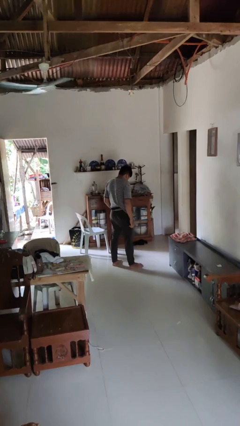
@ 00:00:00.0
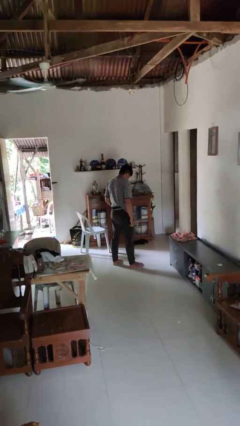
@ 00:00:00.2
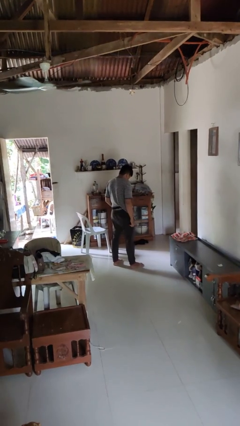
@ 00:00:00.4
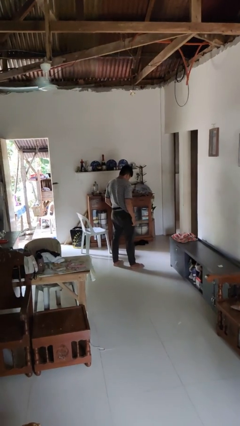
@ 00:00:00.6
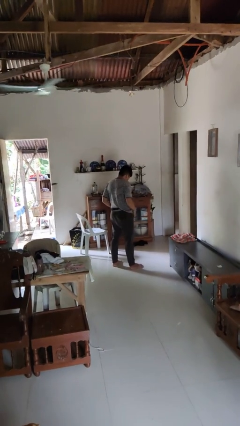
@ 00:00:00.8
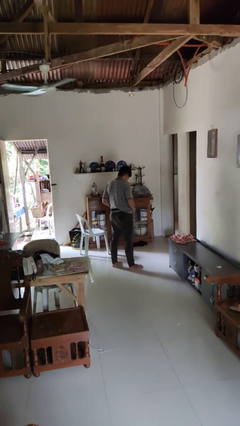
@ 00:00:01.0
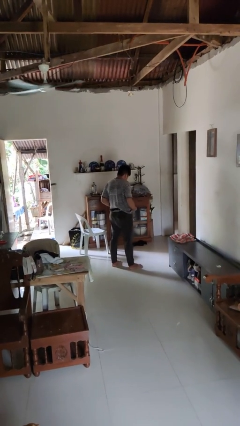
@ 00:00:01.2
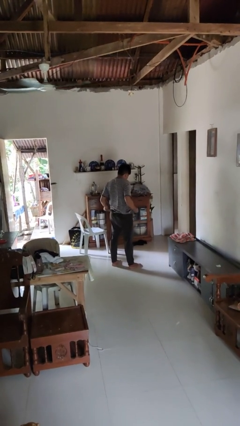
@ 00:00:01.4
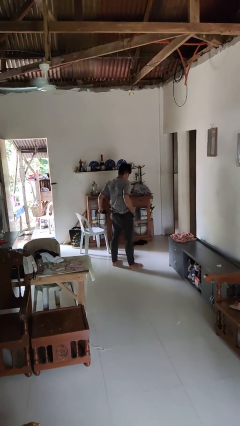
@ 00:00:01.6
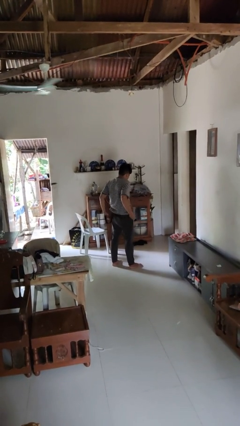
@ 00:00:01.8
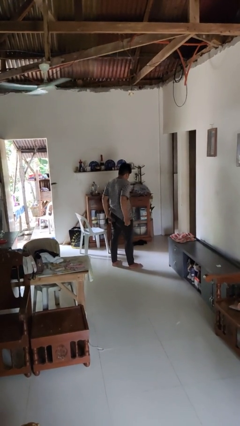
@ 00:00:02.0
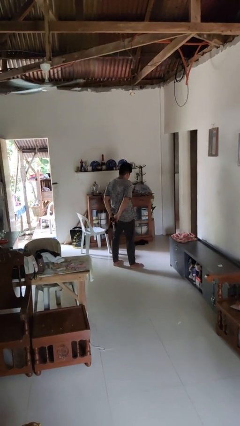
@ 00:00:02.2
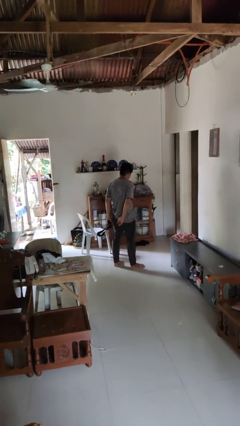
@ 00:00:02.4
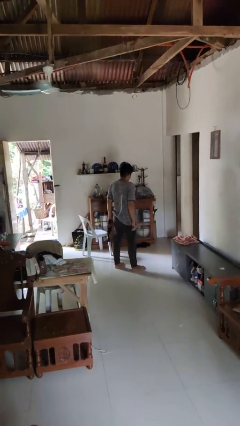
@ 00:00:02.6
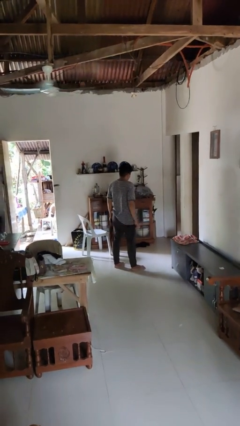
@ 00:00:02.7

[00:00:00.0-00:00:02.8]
person takes off belt

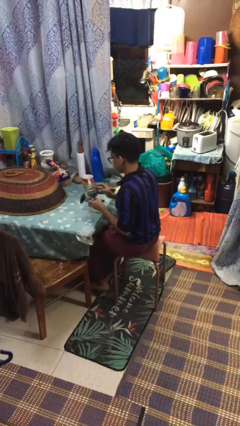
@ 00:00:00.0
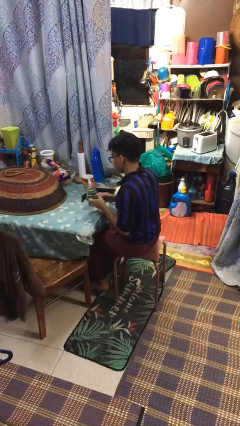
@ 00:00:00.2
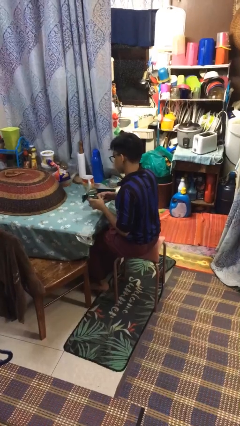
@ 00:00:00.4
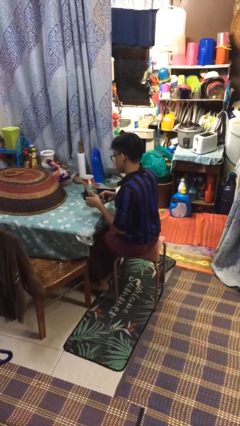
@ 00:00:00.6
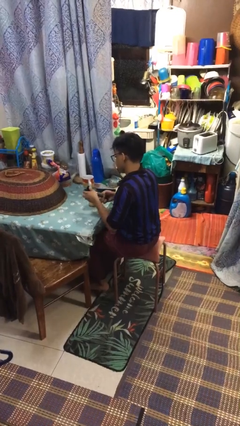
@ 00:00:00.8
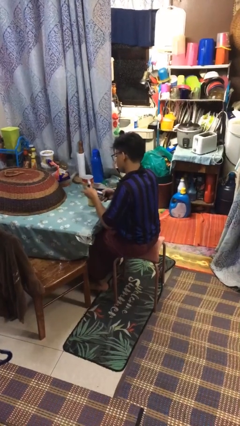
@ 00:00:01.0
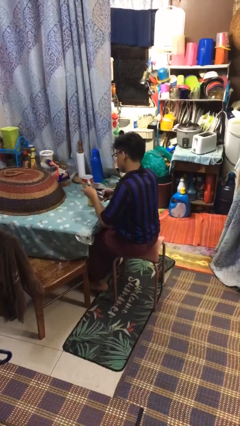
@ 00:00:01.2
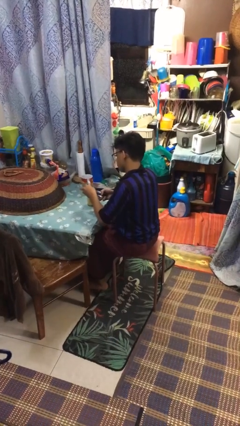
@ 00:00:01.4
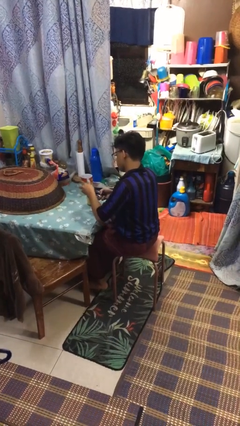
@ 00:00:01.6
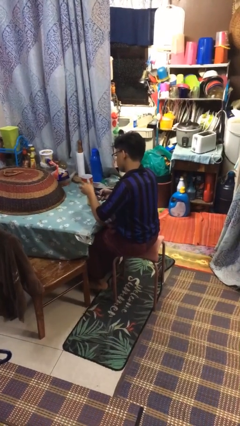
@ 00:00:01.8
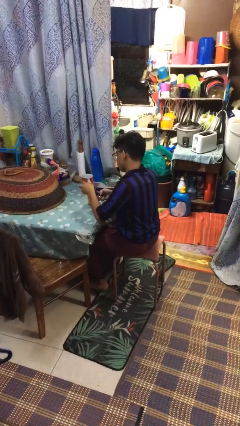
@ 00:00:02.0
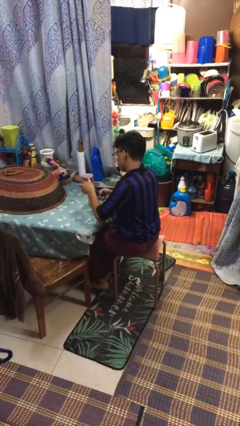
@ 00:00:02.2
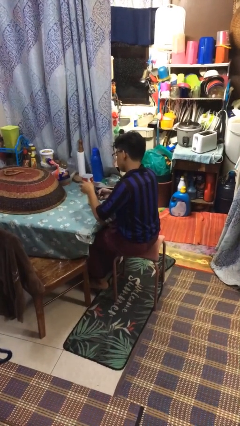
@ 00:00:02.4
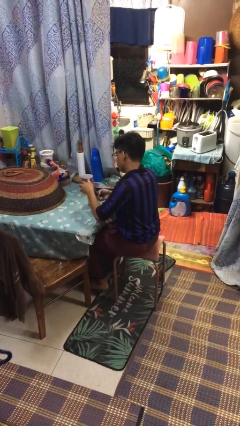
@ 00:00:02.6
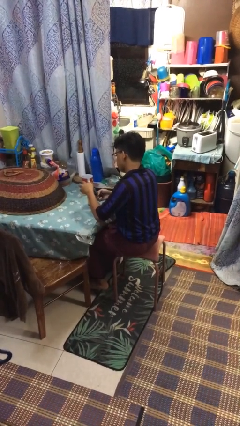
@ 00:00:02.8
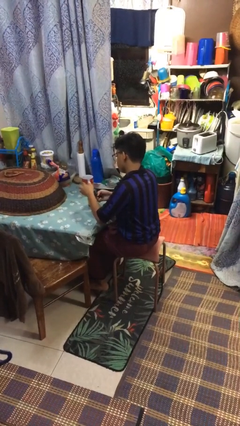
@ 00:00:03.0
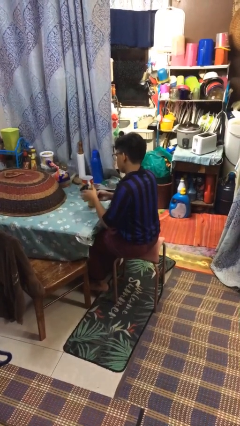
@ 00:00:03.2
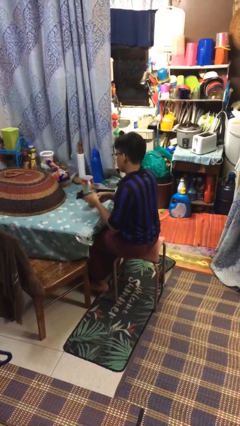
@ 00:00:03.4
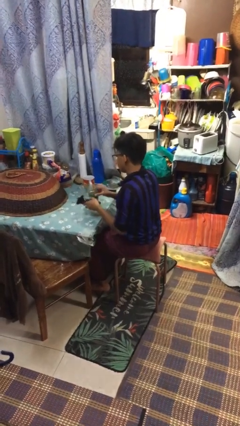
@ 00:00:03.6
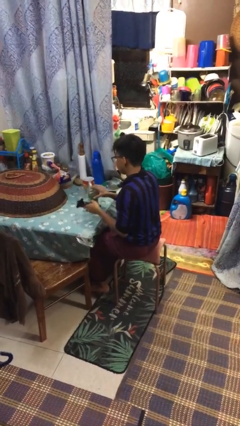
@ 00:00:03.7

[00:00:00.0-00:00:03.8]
person opens can with can opener

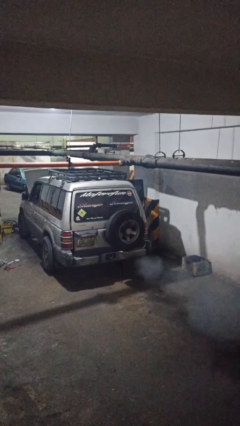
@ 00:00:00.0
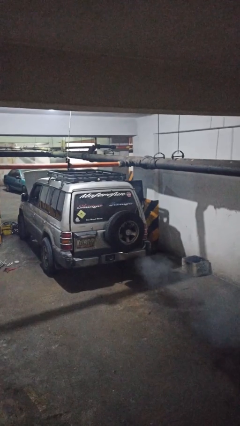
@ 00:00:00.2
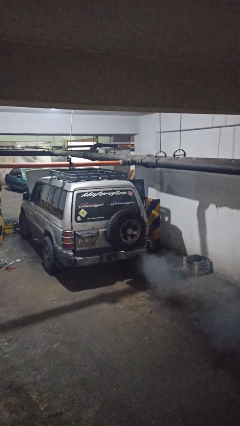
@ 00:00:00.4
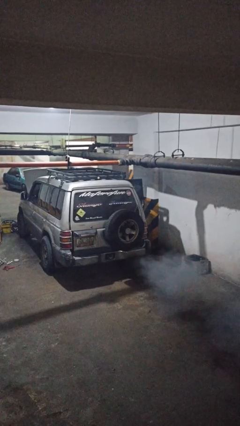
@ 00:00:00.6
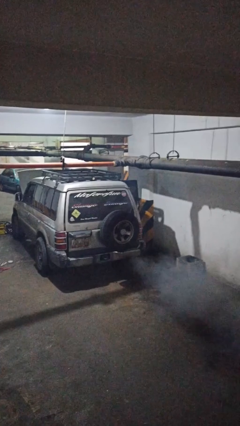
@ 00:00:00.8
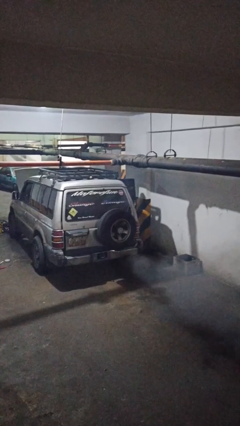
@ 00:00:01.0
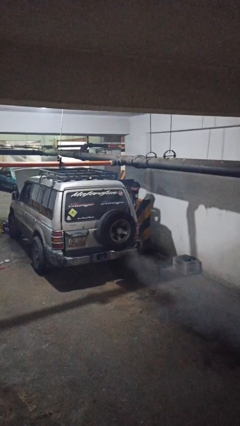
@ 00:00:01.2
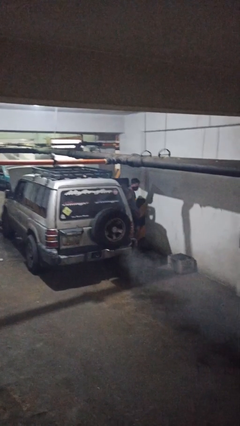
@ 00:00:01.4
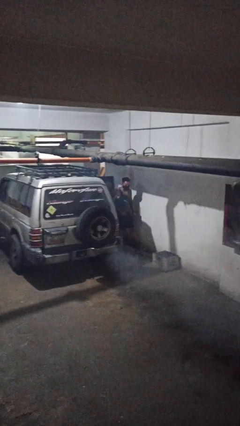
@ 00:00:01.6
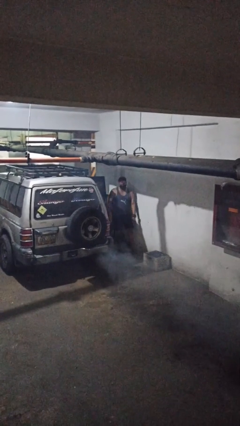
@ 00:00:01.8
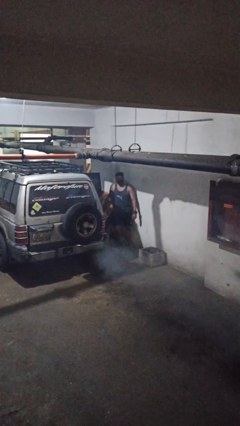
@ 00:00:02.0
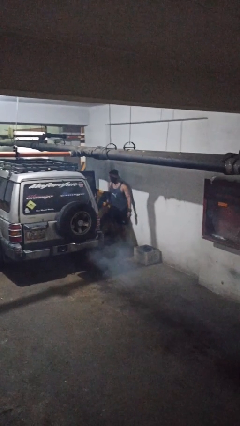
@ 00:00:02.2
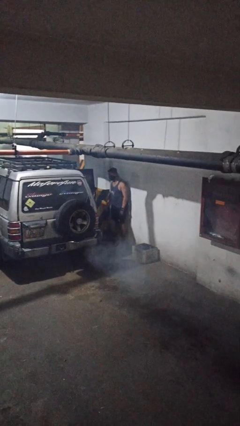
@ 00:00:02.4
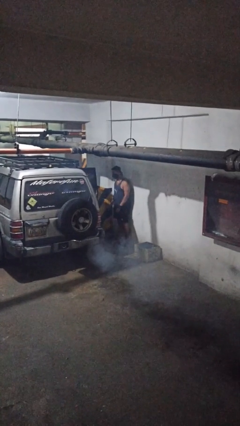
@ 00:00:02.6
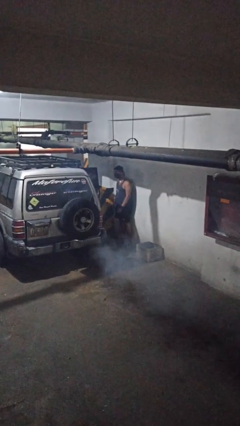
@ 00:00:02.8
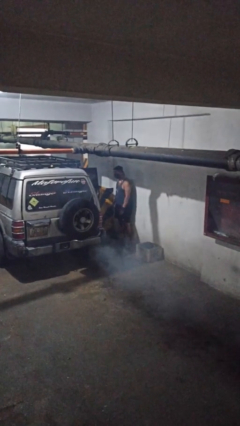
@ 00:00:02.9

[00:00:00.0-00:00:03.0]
person exits car

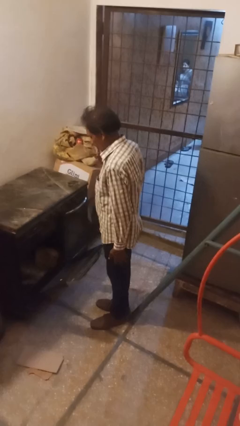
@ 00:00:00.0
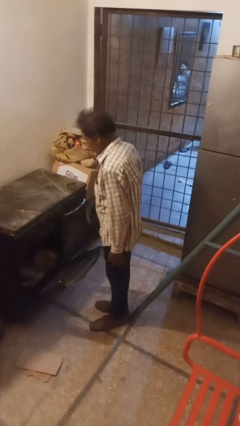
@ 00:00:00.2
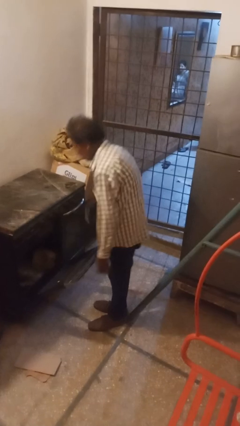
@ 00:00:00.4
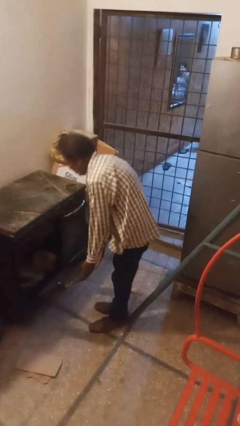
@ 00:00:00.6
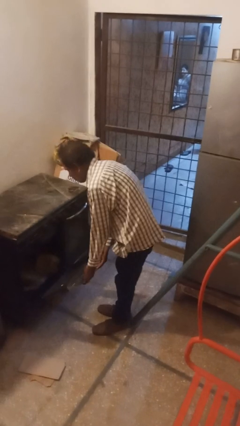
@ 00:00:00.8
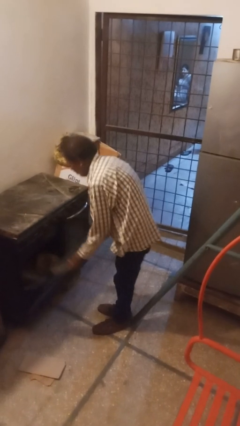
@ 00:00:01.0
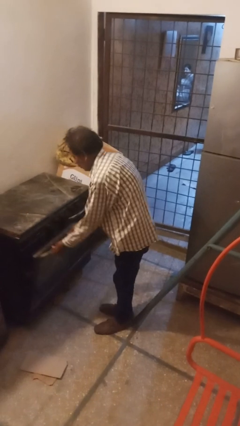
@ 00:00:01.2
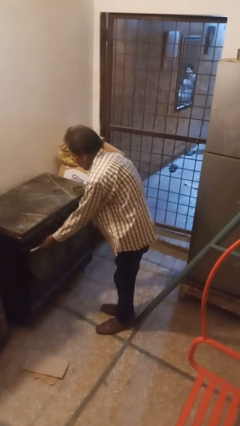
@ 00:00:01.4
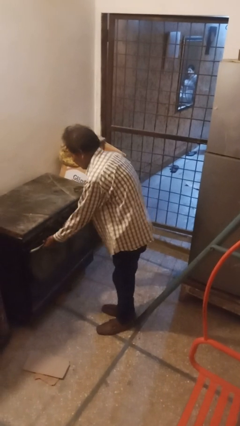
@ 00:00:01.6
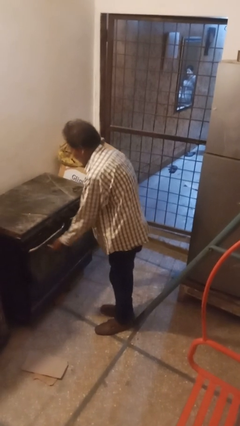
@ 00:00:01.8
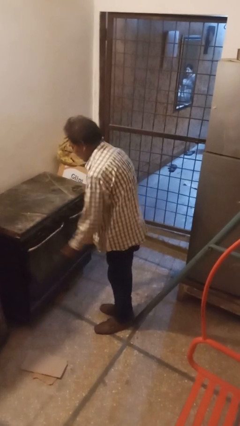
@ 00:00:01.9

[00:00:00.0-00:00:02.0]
person closes oven door

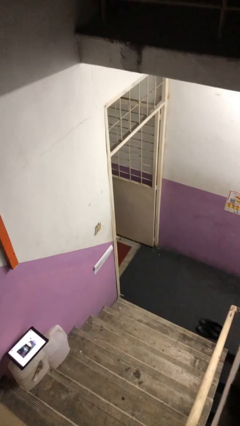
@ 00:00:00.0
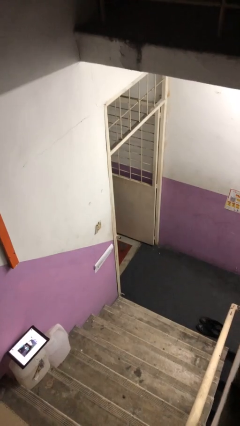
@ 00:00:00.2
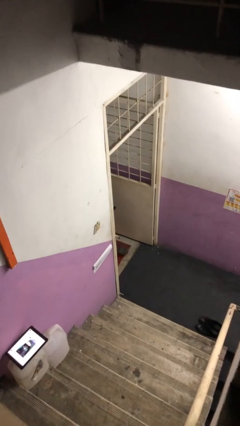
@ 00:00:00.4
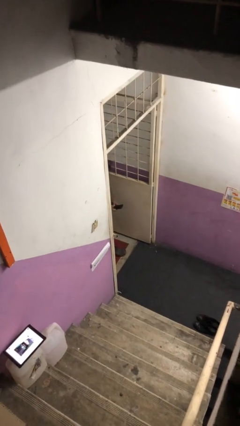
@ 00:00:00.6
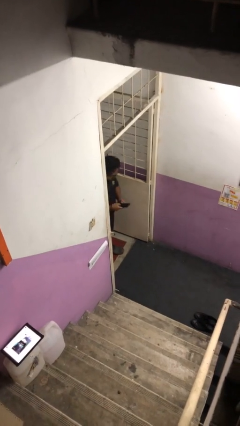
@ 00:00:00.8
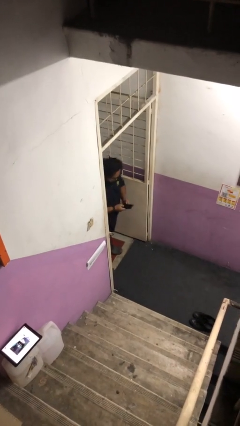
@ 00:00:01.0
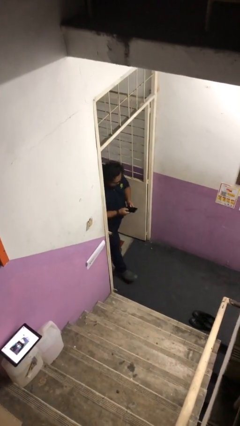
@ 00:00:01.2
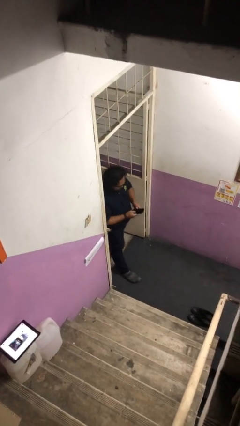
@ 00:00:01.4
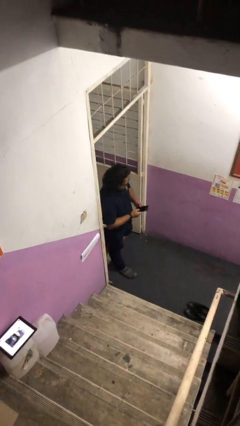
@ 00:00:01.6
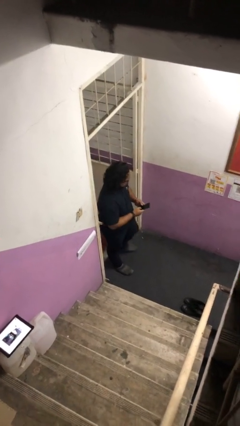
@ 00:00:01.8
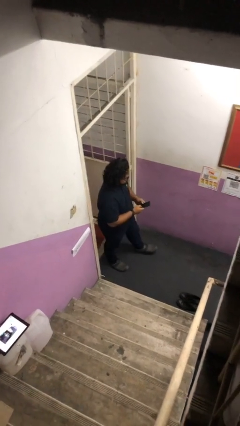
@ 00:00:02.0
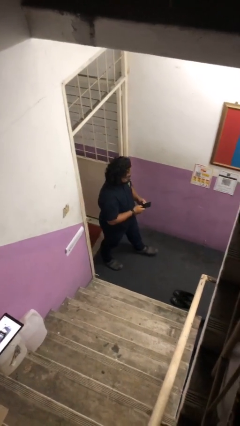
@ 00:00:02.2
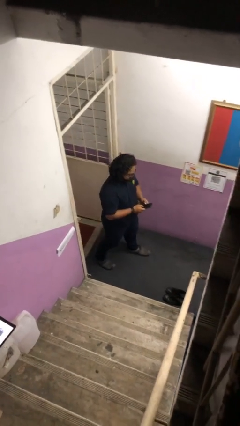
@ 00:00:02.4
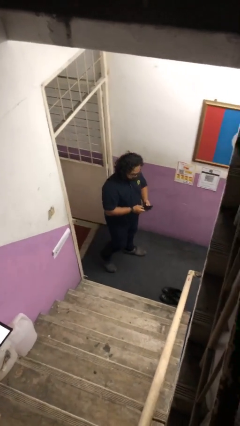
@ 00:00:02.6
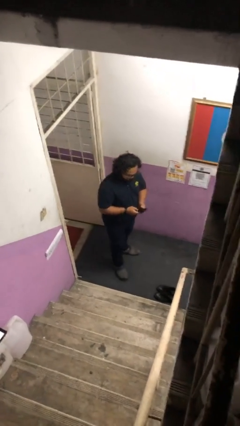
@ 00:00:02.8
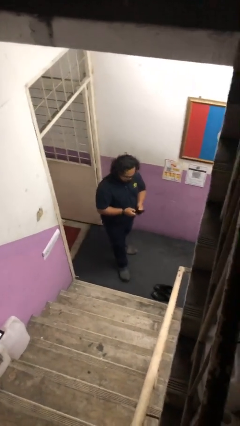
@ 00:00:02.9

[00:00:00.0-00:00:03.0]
person enters scene through structure

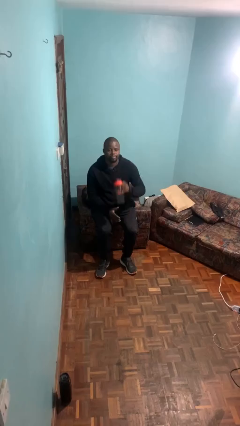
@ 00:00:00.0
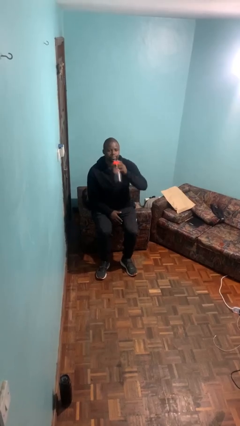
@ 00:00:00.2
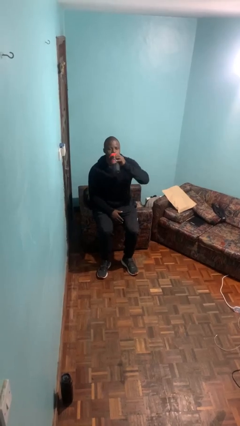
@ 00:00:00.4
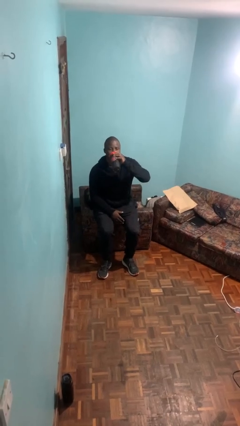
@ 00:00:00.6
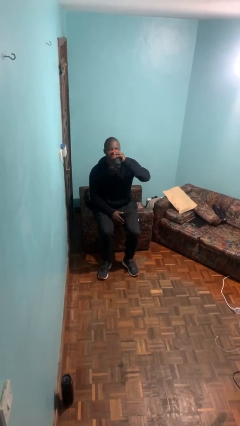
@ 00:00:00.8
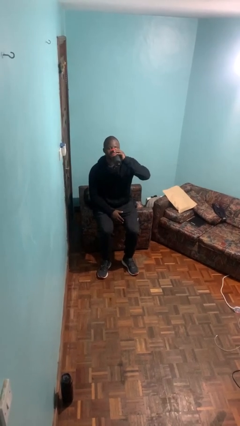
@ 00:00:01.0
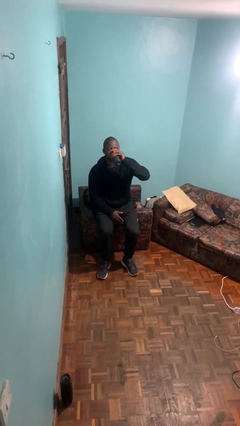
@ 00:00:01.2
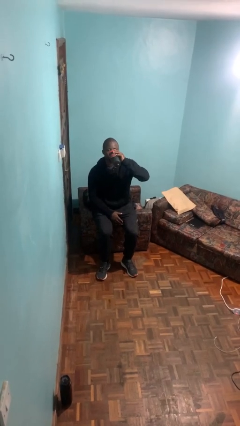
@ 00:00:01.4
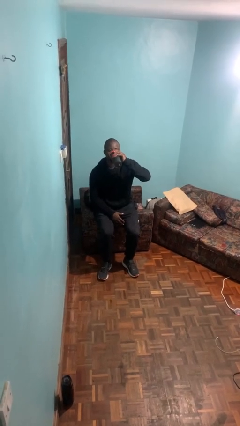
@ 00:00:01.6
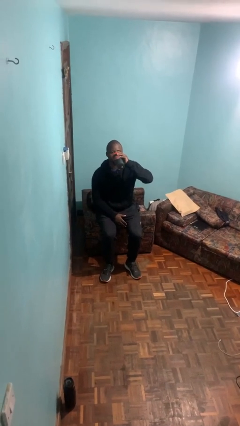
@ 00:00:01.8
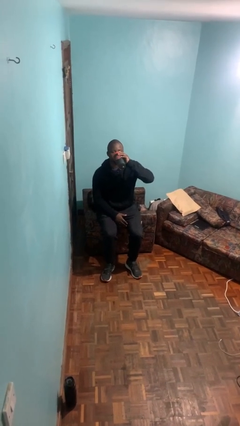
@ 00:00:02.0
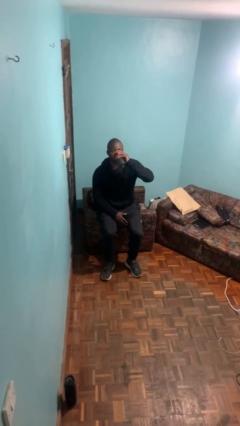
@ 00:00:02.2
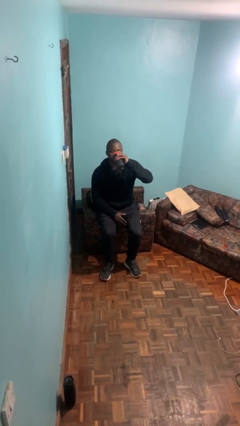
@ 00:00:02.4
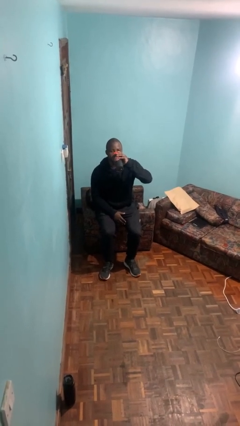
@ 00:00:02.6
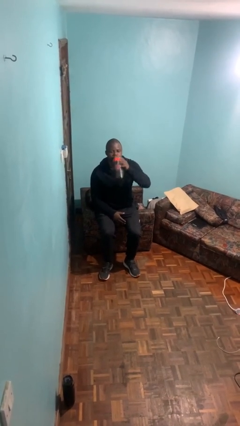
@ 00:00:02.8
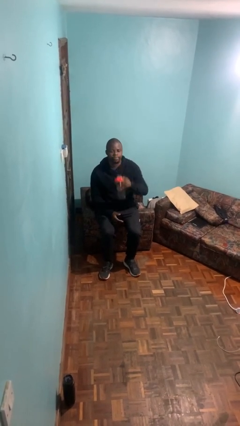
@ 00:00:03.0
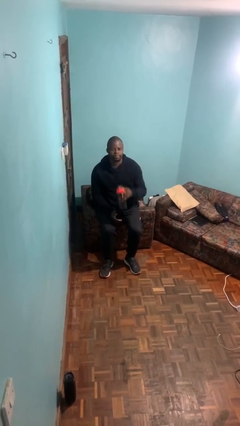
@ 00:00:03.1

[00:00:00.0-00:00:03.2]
person drinks from bottle
